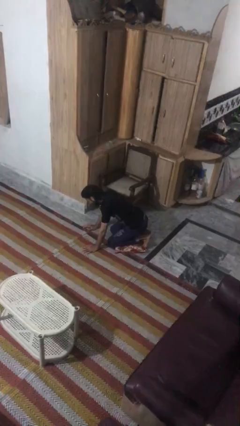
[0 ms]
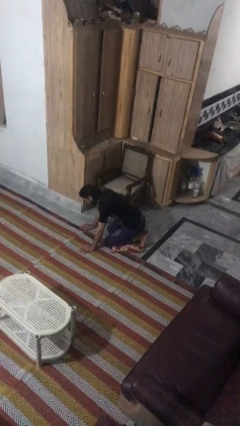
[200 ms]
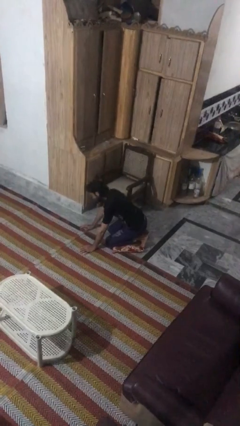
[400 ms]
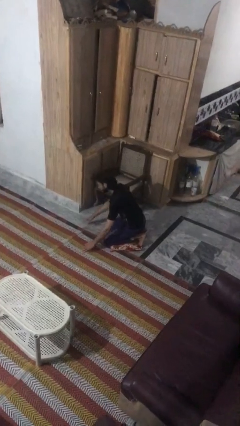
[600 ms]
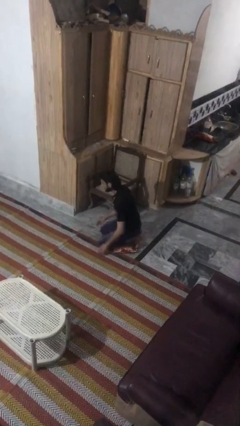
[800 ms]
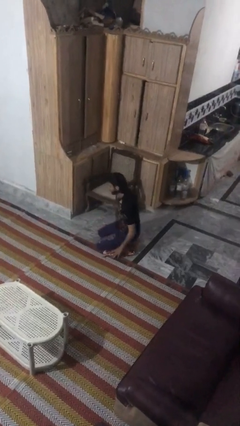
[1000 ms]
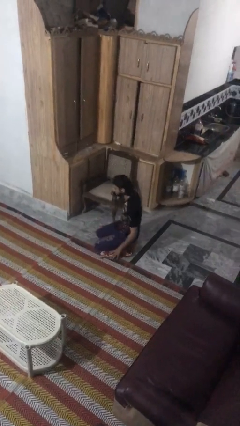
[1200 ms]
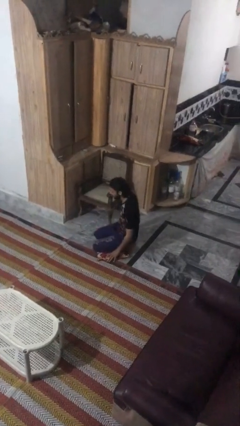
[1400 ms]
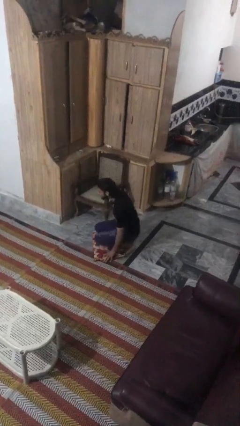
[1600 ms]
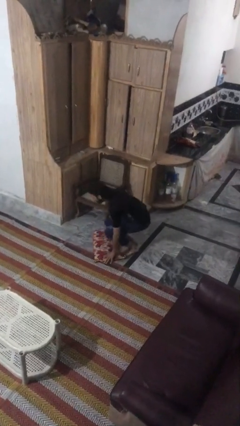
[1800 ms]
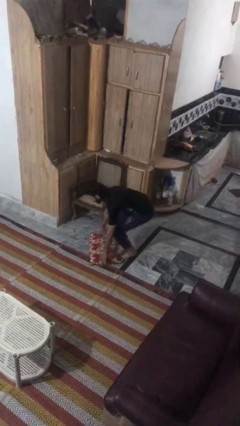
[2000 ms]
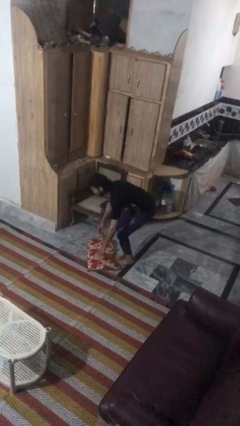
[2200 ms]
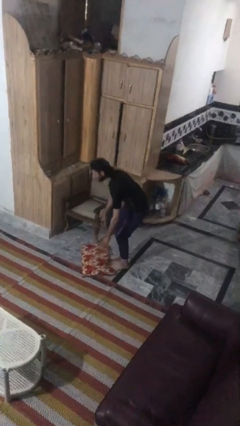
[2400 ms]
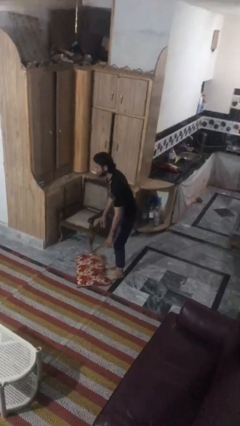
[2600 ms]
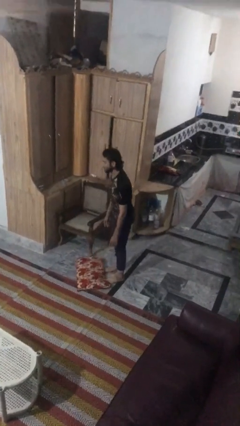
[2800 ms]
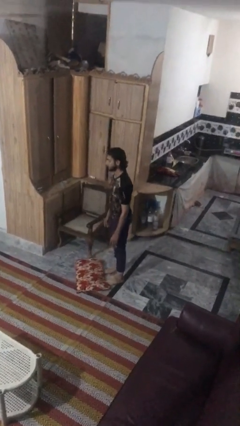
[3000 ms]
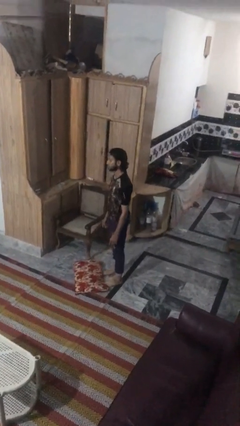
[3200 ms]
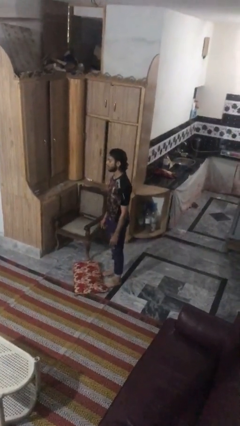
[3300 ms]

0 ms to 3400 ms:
person stands up from floor

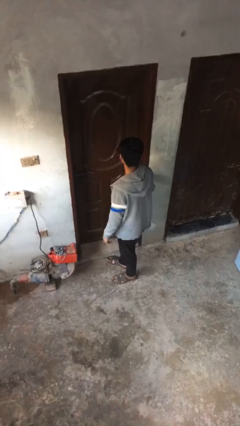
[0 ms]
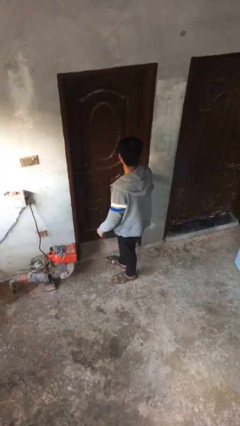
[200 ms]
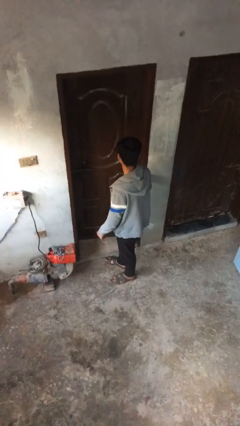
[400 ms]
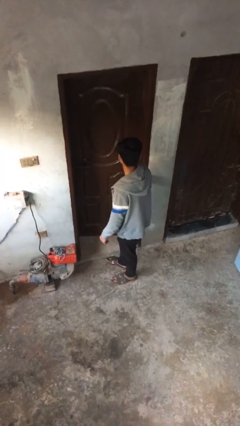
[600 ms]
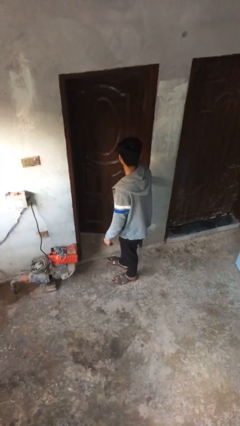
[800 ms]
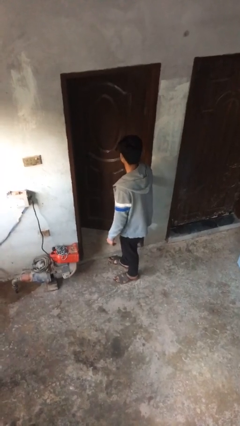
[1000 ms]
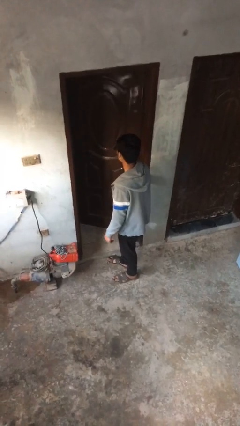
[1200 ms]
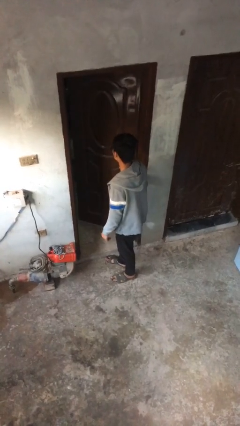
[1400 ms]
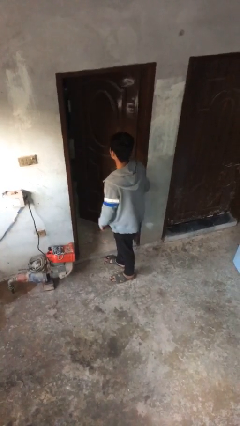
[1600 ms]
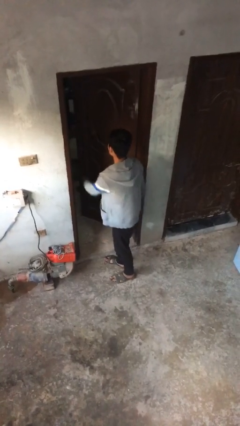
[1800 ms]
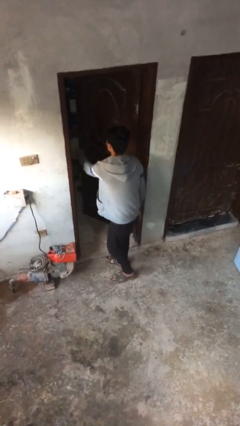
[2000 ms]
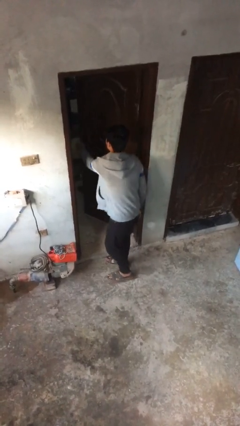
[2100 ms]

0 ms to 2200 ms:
person opens facility door

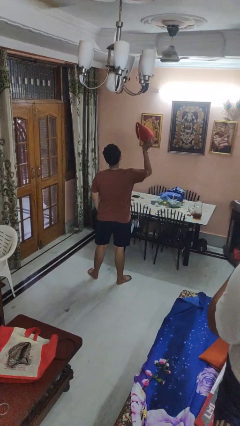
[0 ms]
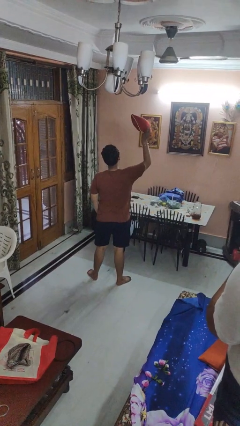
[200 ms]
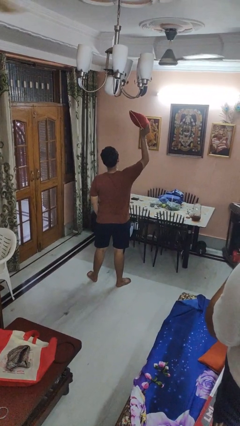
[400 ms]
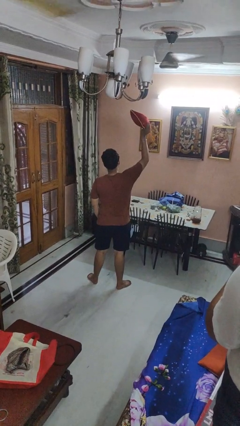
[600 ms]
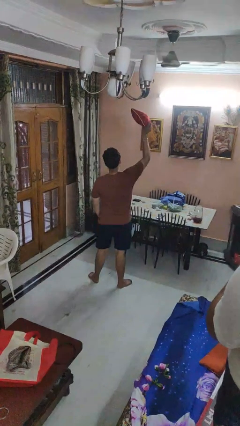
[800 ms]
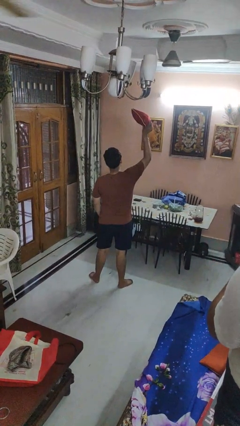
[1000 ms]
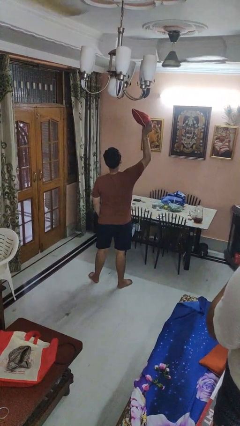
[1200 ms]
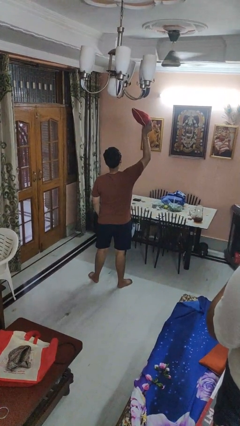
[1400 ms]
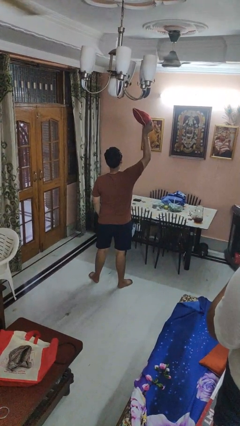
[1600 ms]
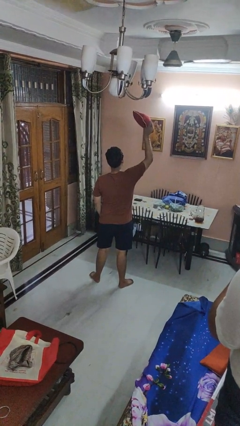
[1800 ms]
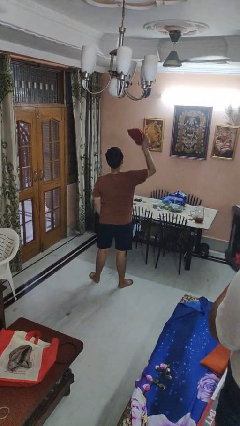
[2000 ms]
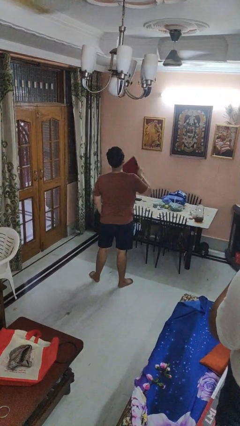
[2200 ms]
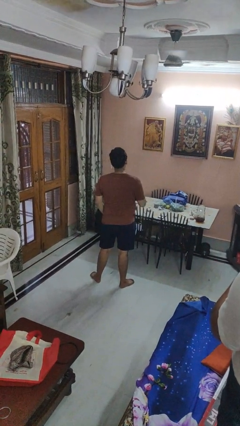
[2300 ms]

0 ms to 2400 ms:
person holds object above head

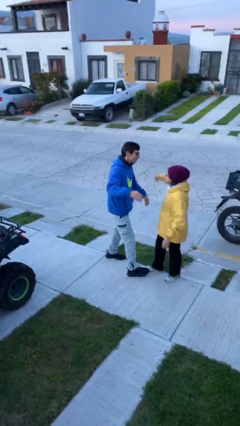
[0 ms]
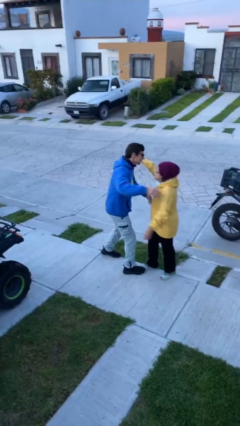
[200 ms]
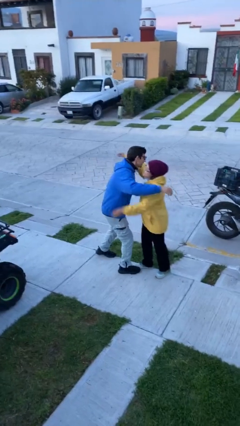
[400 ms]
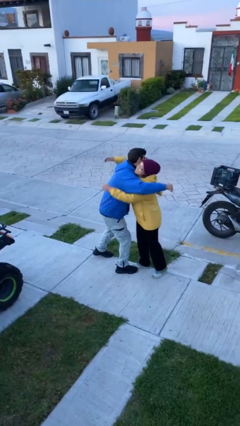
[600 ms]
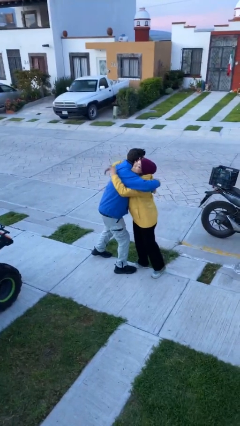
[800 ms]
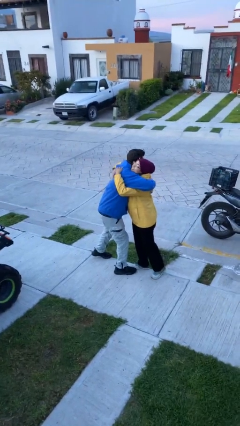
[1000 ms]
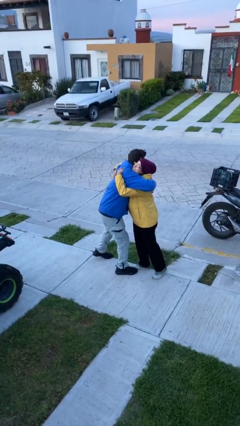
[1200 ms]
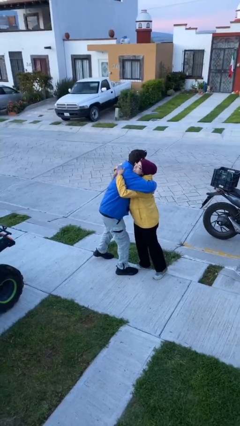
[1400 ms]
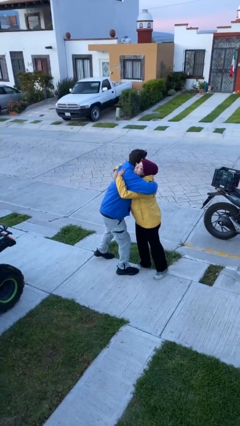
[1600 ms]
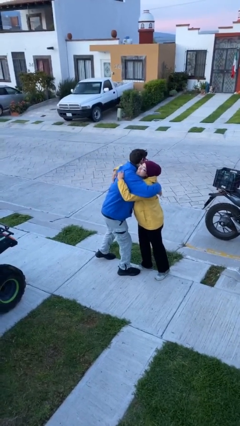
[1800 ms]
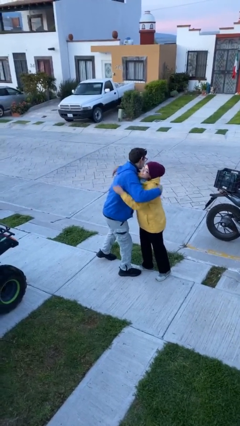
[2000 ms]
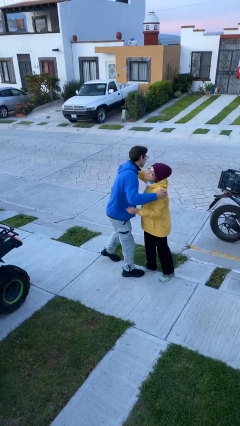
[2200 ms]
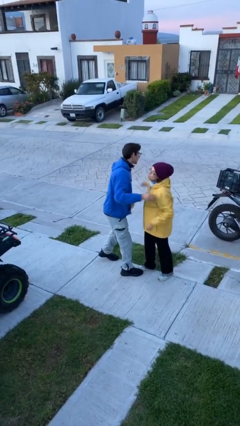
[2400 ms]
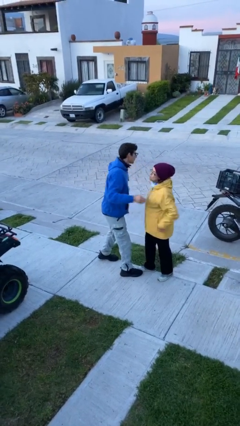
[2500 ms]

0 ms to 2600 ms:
person embraces person

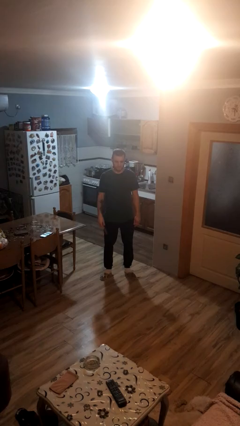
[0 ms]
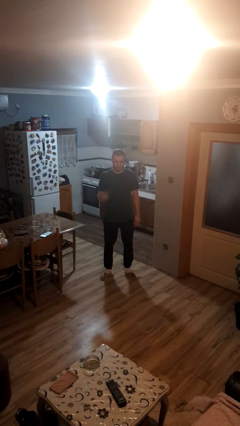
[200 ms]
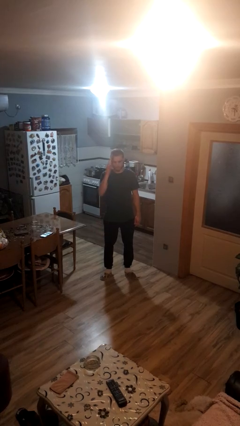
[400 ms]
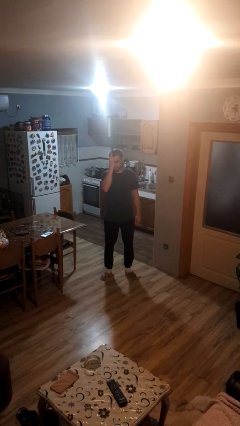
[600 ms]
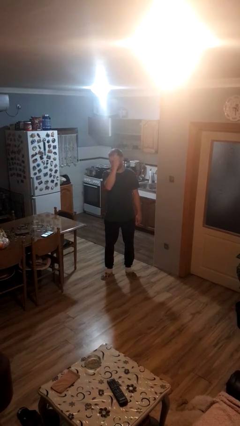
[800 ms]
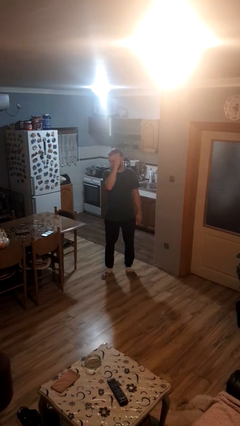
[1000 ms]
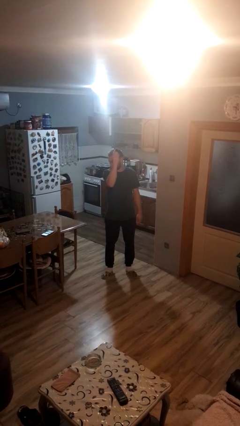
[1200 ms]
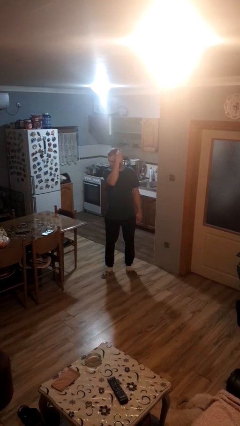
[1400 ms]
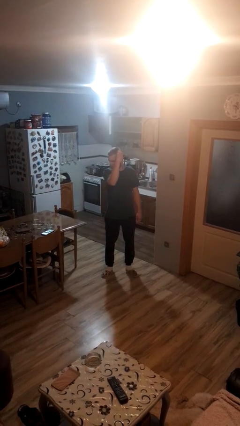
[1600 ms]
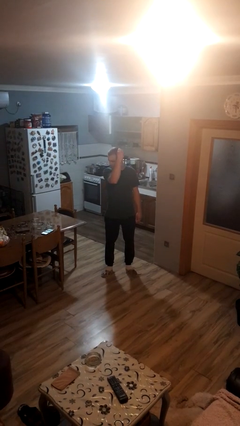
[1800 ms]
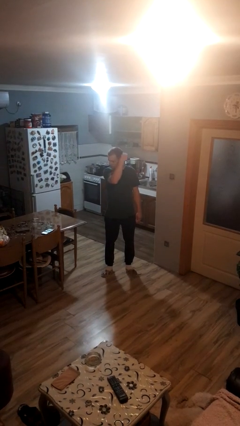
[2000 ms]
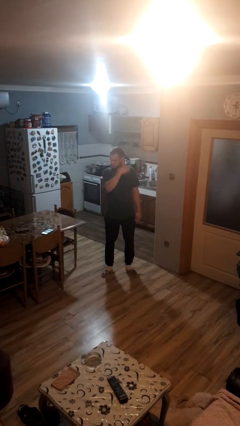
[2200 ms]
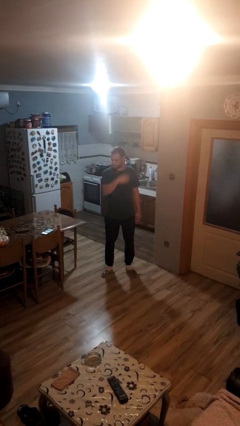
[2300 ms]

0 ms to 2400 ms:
person brushes hair

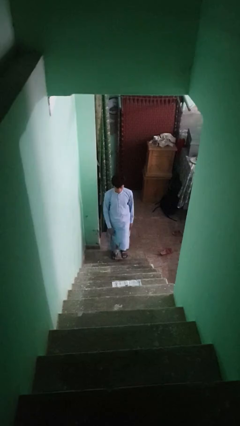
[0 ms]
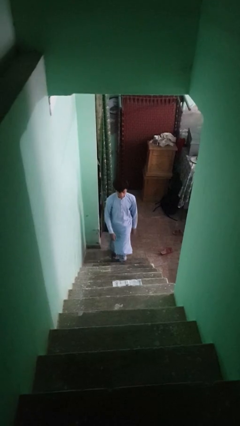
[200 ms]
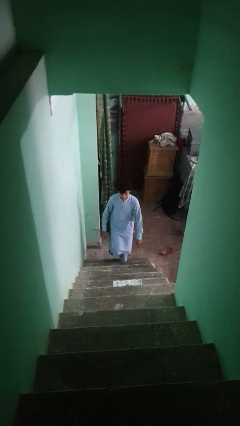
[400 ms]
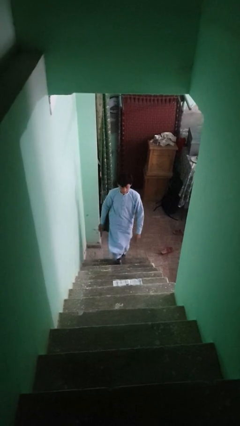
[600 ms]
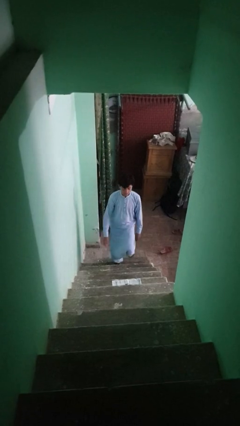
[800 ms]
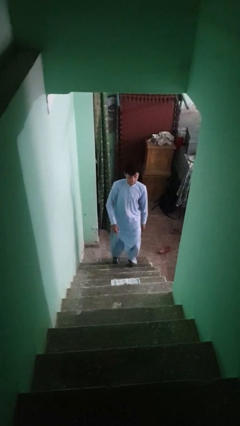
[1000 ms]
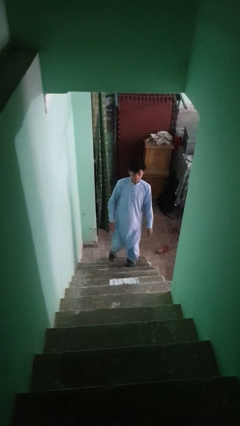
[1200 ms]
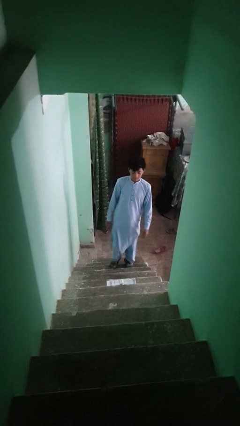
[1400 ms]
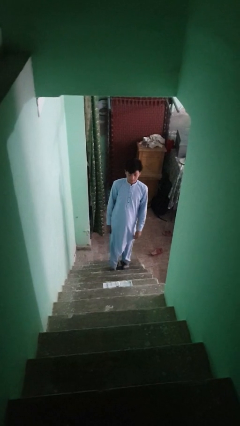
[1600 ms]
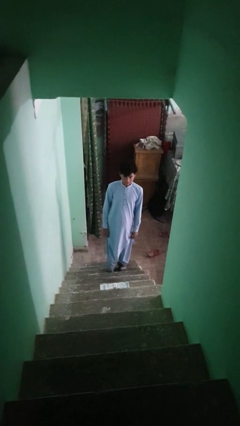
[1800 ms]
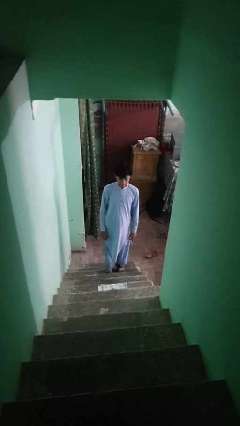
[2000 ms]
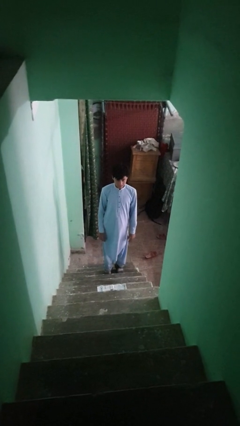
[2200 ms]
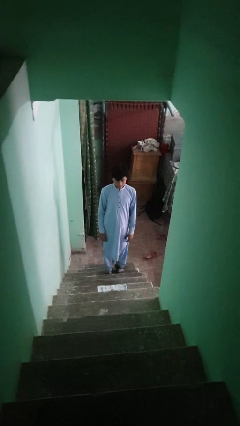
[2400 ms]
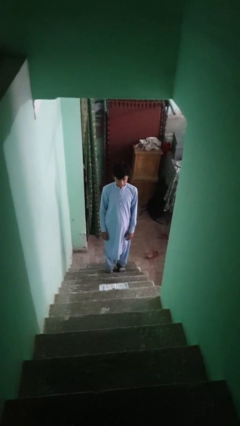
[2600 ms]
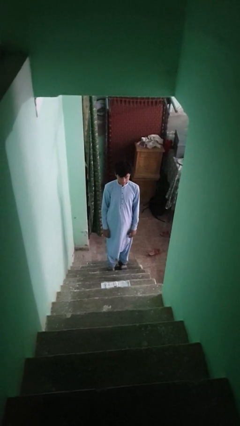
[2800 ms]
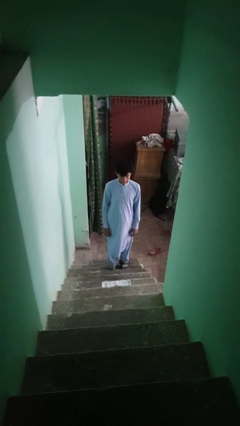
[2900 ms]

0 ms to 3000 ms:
person climbs up stairs

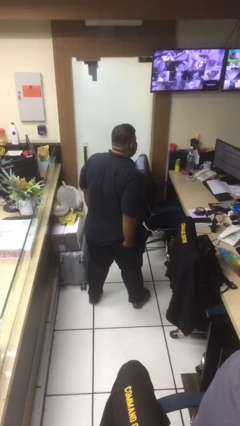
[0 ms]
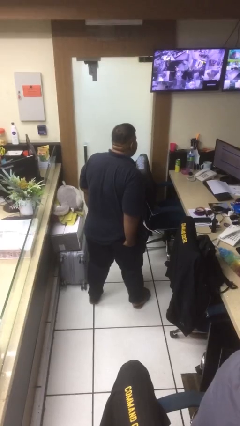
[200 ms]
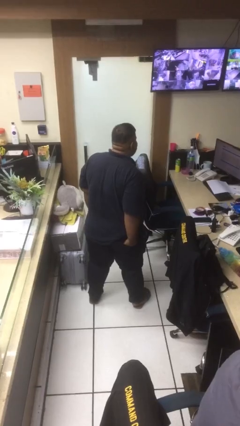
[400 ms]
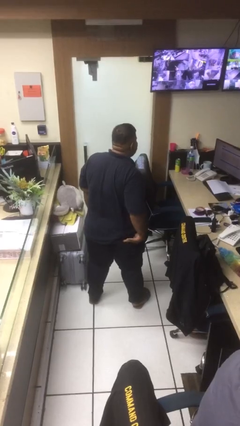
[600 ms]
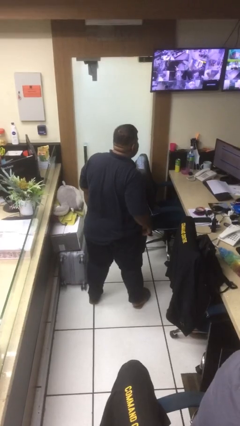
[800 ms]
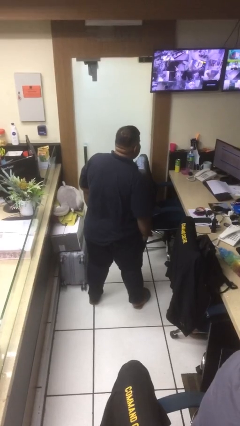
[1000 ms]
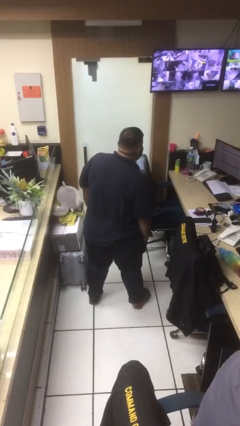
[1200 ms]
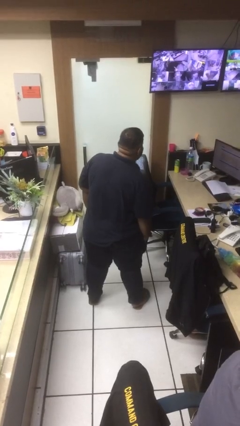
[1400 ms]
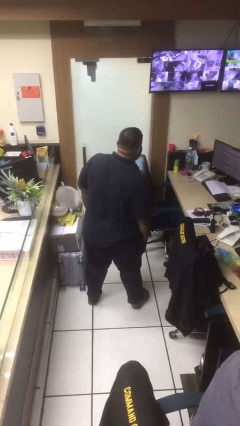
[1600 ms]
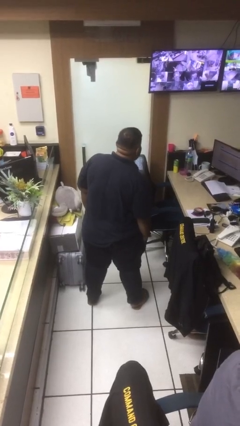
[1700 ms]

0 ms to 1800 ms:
person puts hands in back pockets
